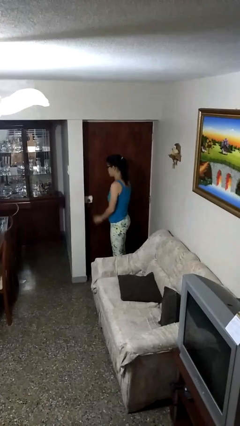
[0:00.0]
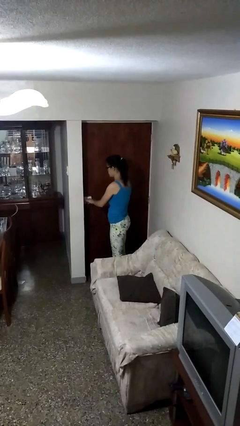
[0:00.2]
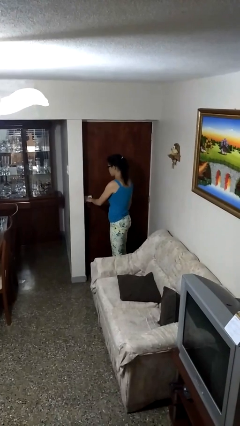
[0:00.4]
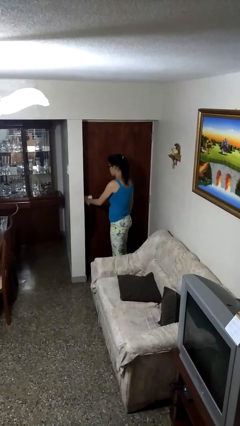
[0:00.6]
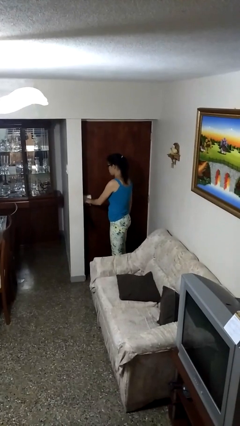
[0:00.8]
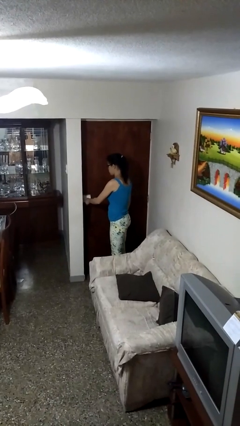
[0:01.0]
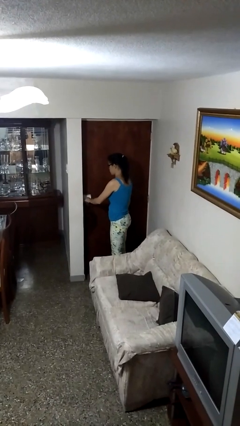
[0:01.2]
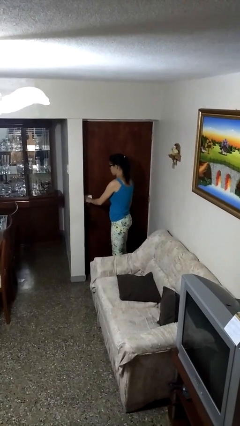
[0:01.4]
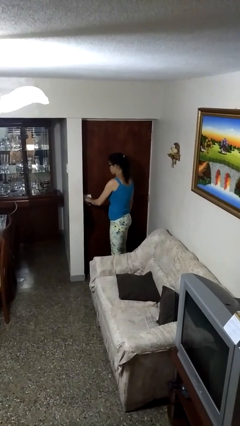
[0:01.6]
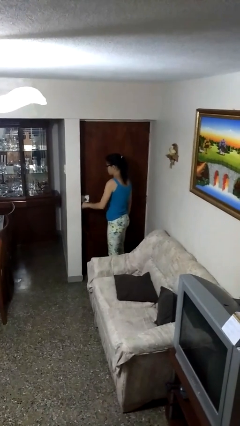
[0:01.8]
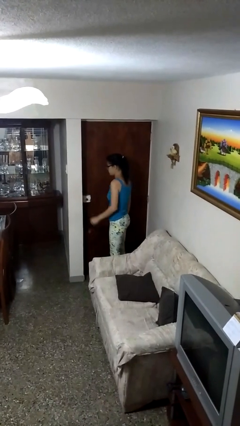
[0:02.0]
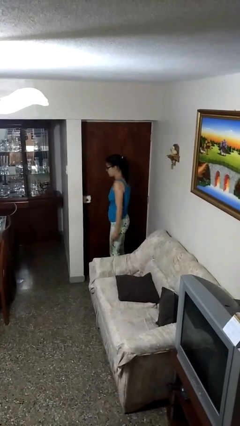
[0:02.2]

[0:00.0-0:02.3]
person locks door with keys

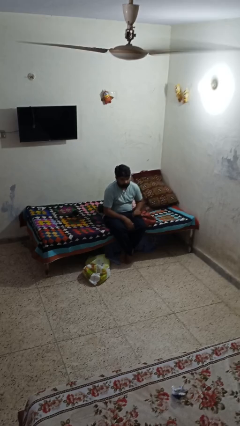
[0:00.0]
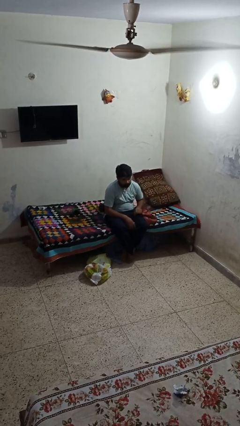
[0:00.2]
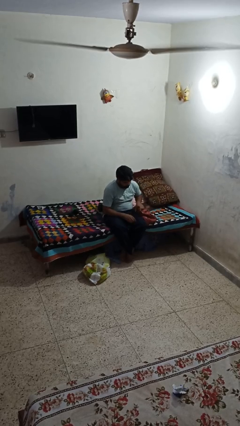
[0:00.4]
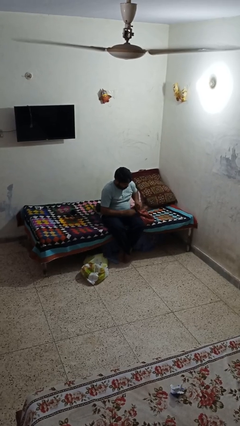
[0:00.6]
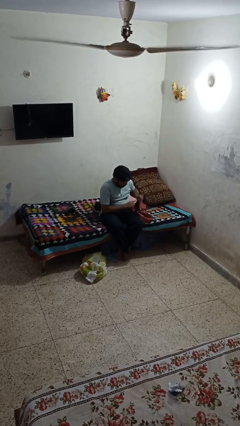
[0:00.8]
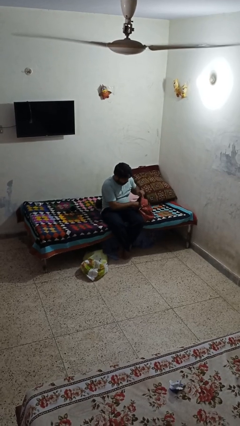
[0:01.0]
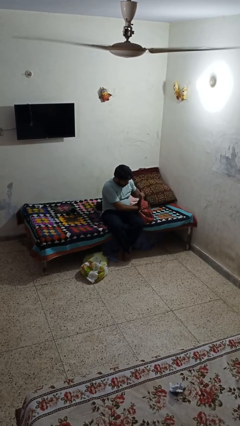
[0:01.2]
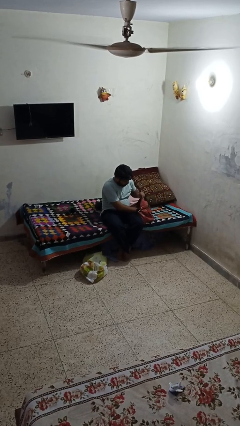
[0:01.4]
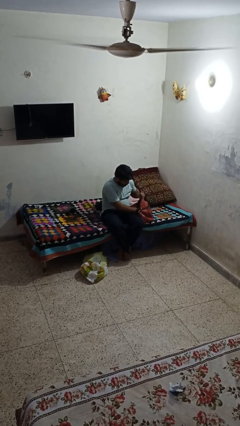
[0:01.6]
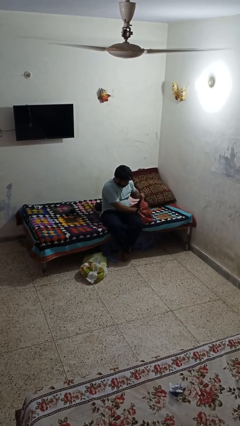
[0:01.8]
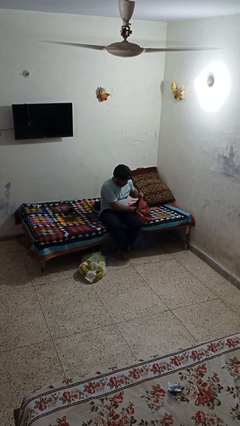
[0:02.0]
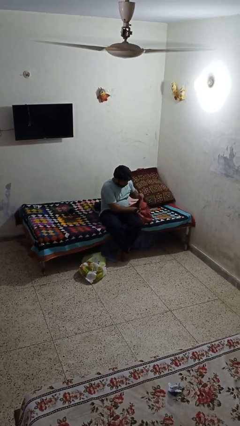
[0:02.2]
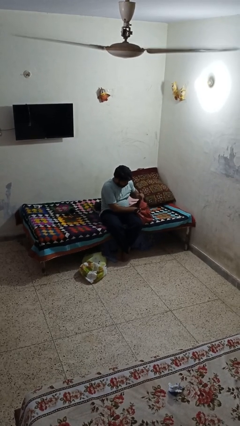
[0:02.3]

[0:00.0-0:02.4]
person searches in purse

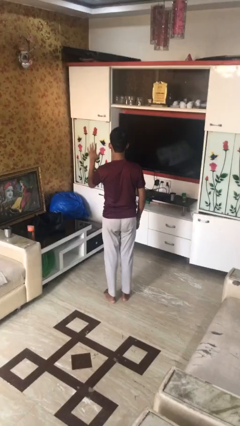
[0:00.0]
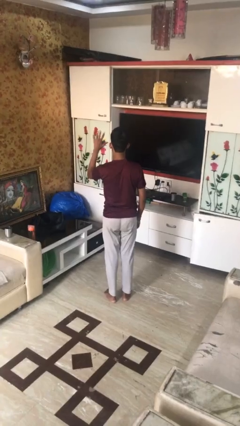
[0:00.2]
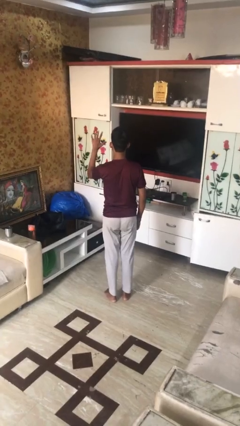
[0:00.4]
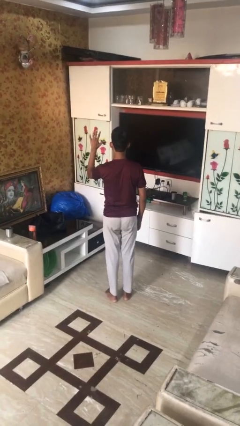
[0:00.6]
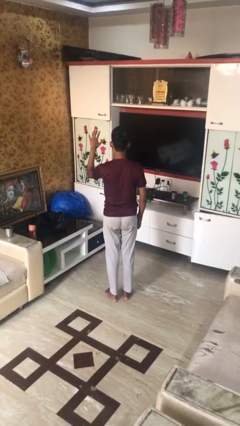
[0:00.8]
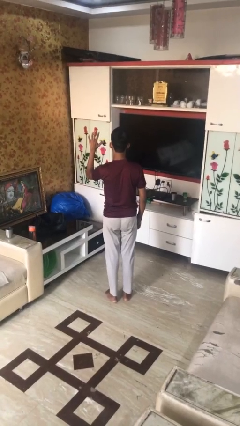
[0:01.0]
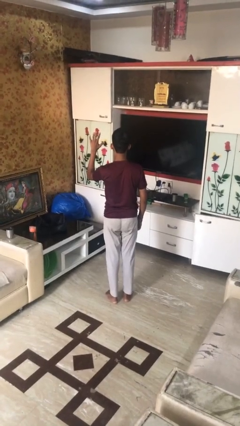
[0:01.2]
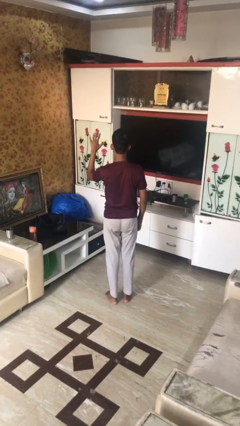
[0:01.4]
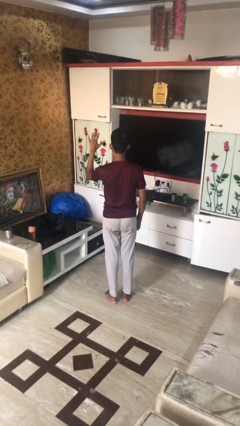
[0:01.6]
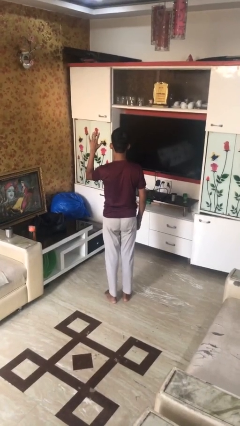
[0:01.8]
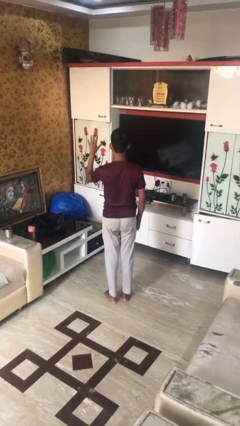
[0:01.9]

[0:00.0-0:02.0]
person gestures number five

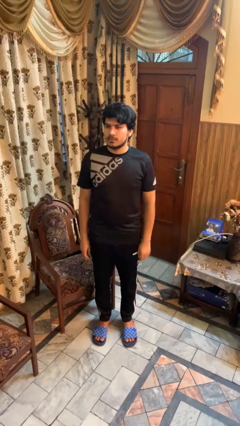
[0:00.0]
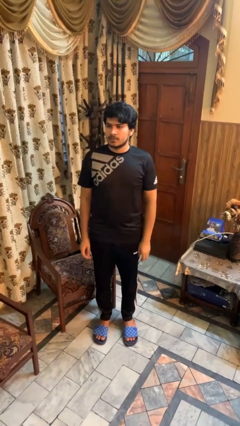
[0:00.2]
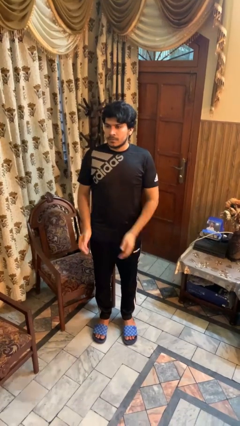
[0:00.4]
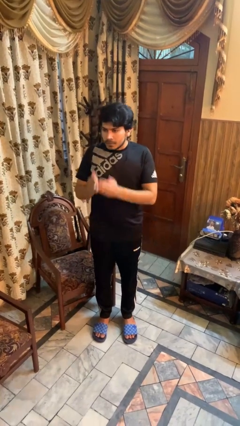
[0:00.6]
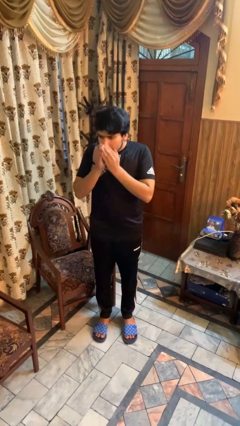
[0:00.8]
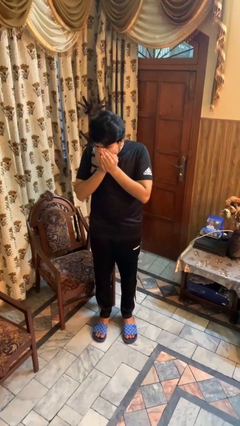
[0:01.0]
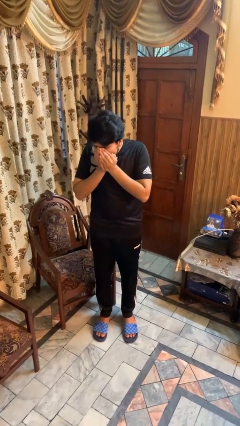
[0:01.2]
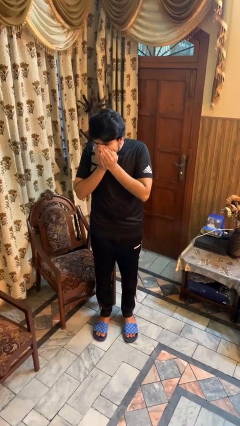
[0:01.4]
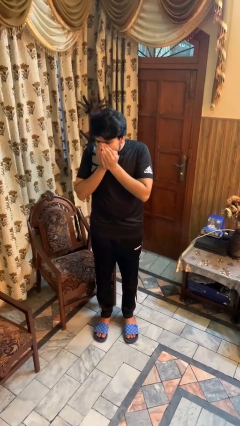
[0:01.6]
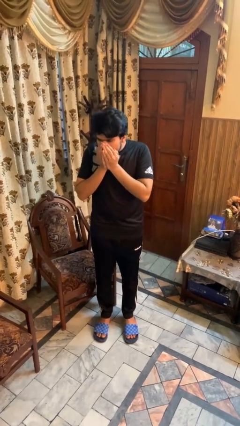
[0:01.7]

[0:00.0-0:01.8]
person sneezes into hand

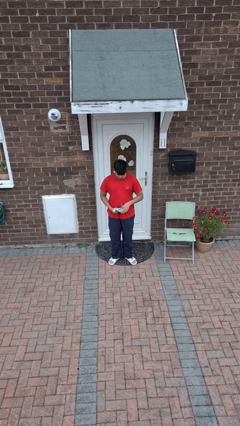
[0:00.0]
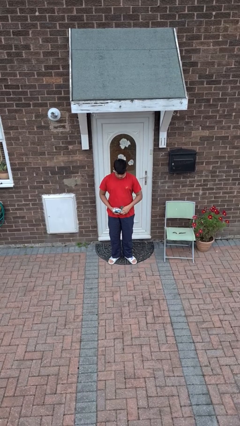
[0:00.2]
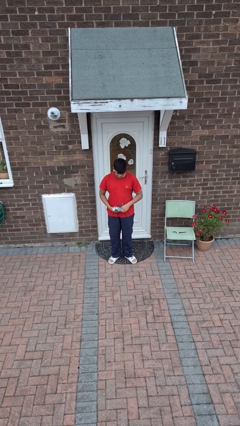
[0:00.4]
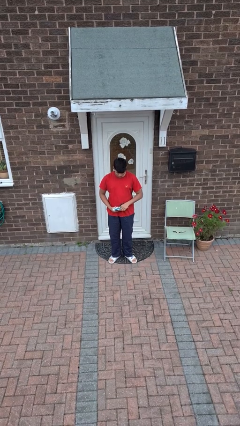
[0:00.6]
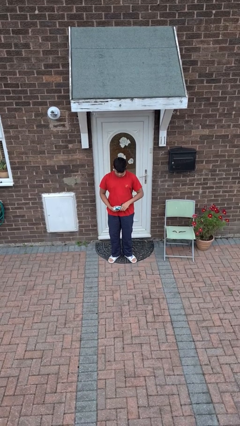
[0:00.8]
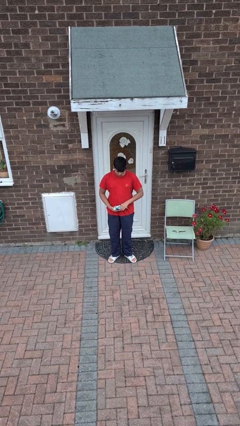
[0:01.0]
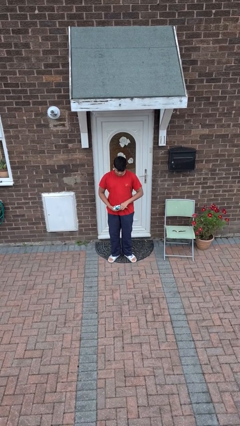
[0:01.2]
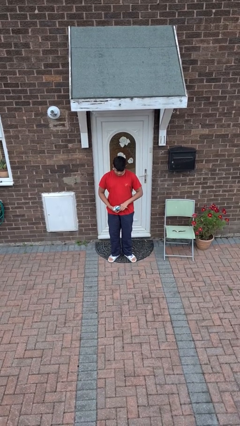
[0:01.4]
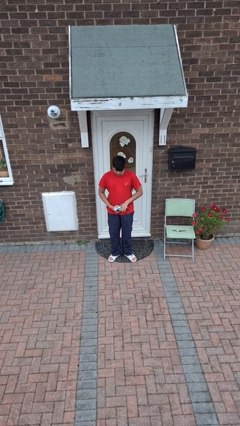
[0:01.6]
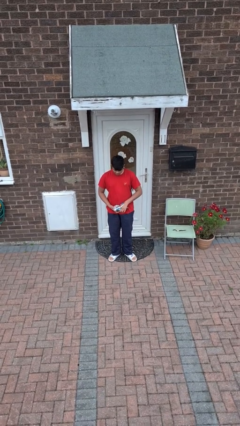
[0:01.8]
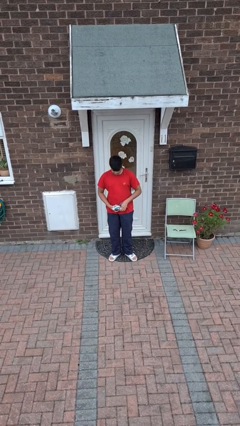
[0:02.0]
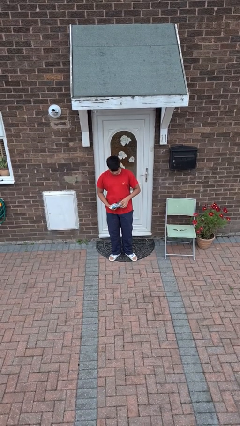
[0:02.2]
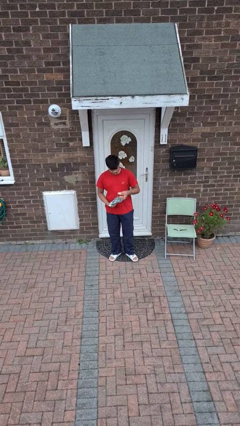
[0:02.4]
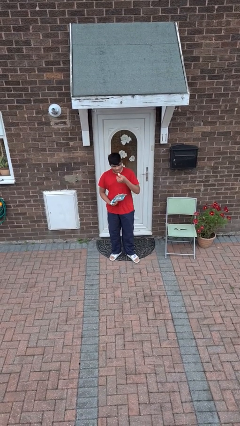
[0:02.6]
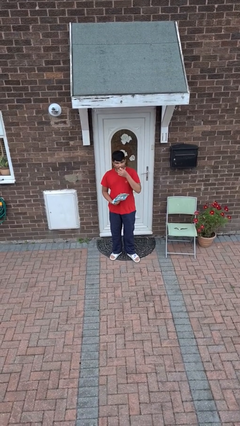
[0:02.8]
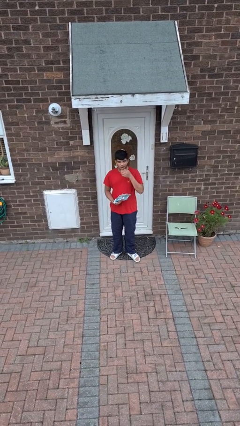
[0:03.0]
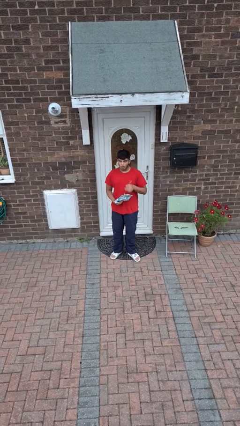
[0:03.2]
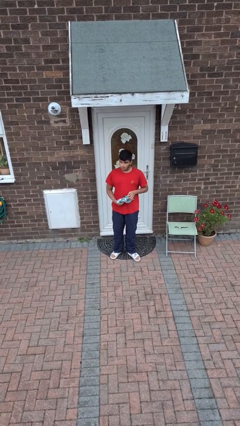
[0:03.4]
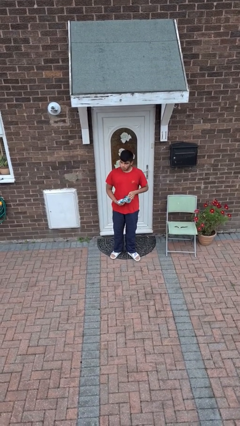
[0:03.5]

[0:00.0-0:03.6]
person eats snack from bag

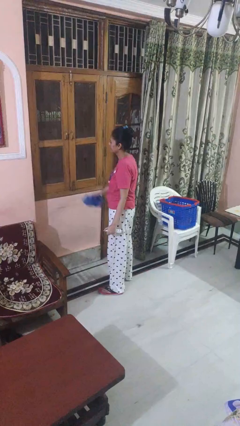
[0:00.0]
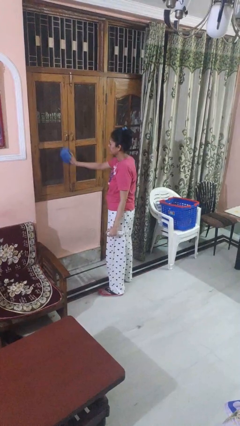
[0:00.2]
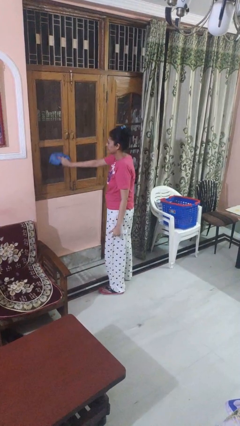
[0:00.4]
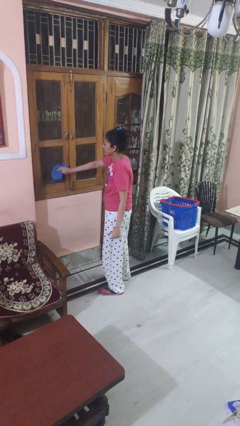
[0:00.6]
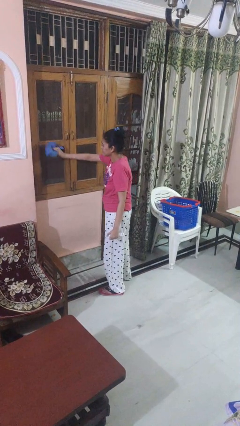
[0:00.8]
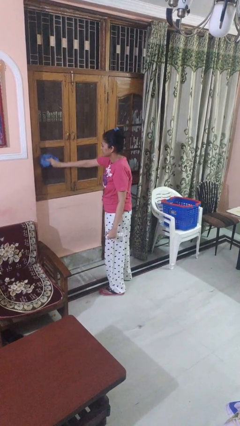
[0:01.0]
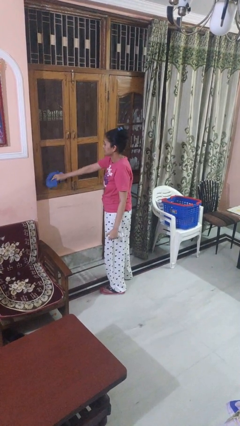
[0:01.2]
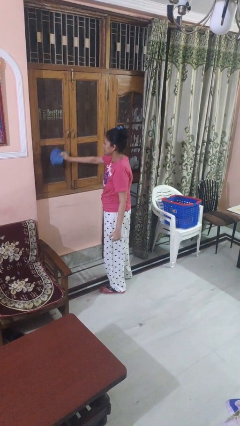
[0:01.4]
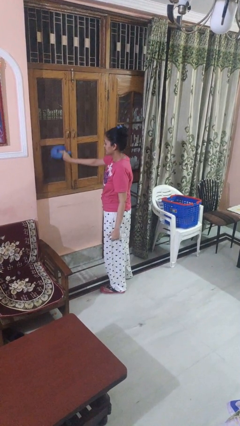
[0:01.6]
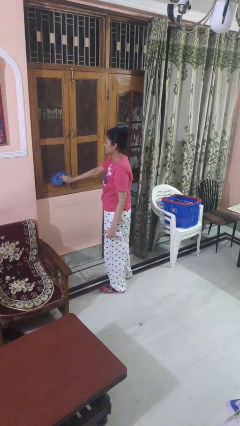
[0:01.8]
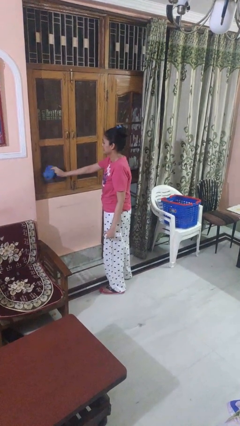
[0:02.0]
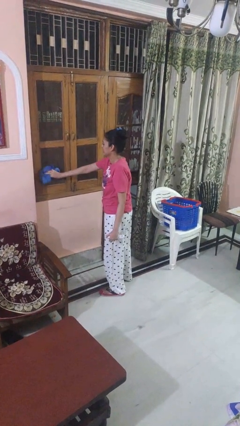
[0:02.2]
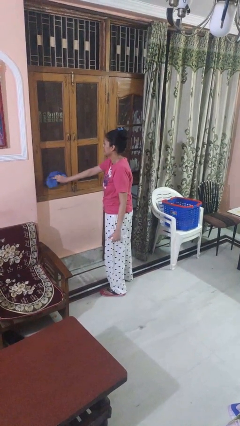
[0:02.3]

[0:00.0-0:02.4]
person washes window

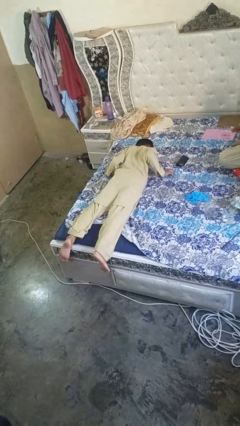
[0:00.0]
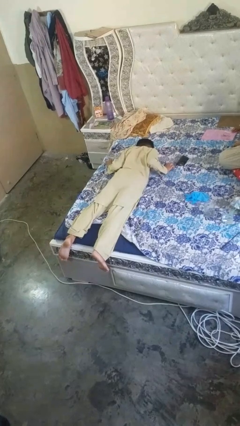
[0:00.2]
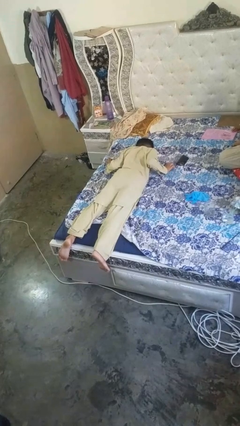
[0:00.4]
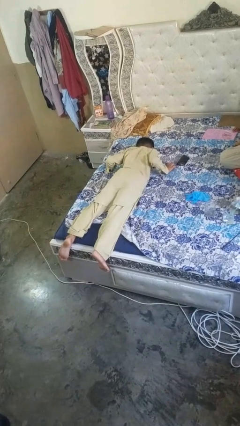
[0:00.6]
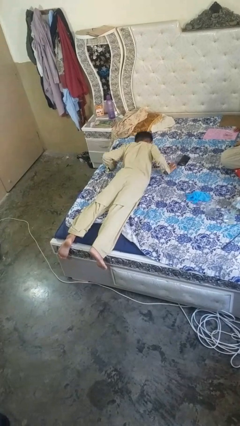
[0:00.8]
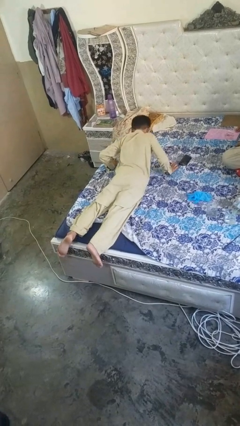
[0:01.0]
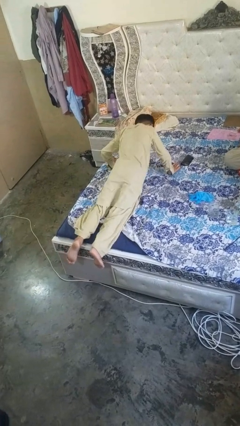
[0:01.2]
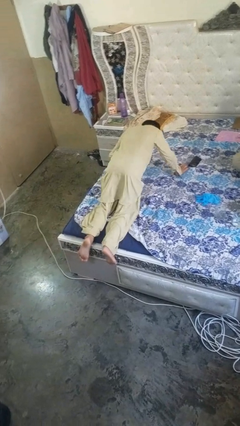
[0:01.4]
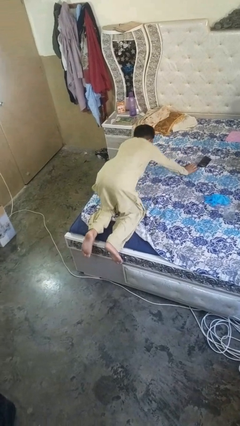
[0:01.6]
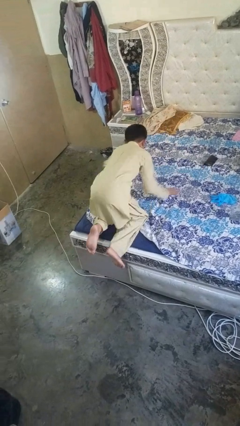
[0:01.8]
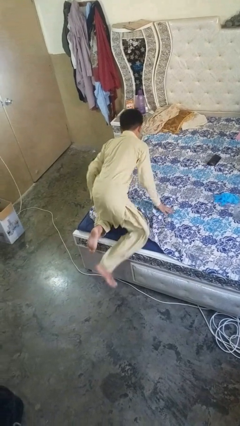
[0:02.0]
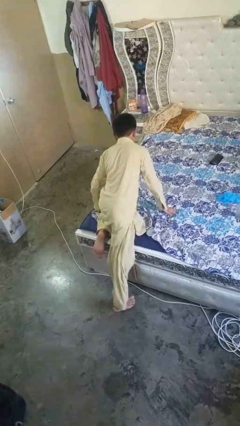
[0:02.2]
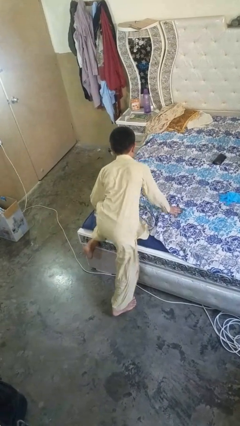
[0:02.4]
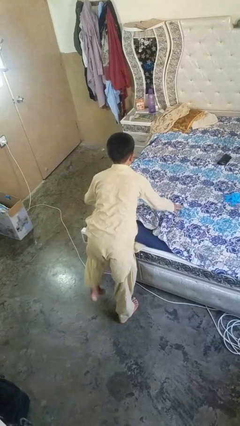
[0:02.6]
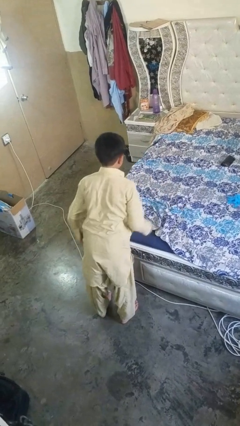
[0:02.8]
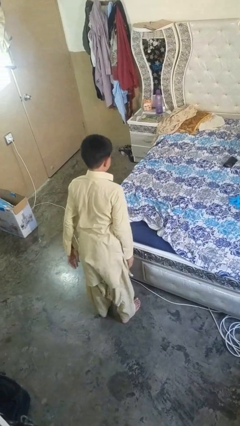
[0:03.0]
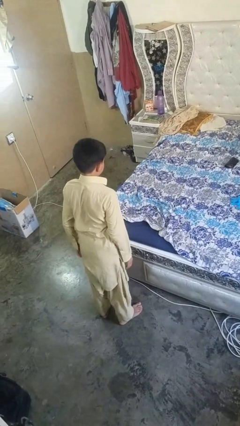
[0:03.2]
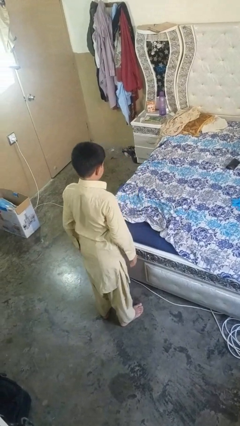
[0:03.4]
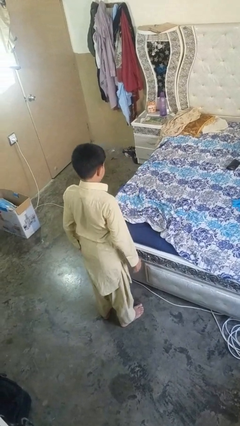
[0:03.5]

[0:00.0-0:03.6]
person stands up
